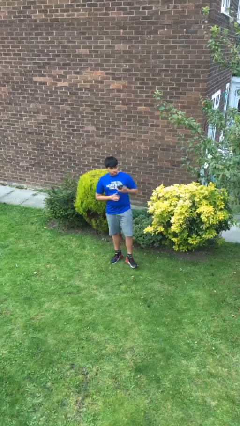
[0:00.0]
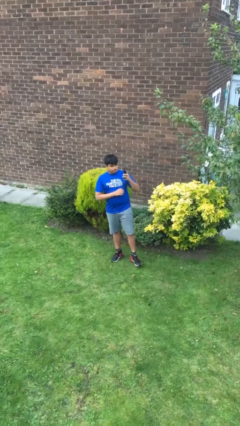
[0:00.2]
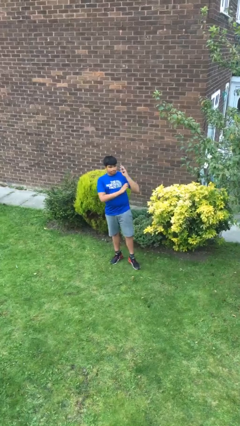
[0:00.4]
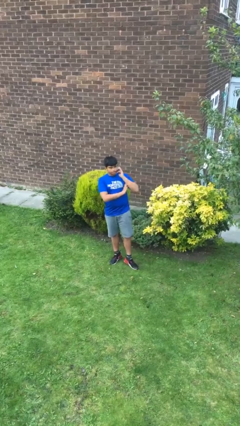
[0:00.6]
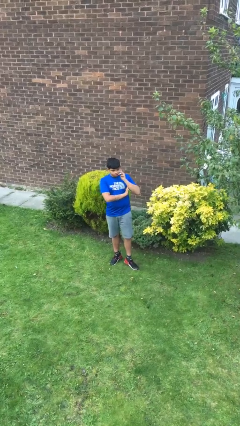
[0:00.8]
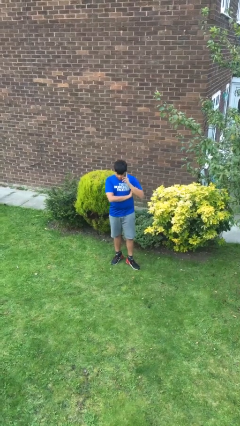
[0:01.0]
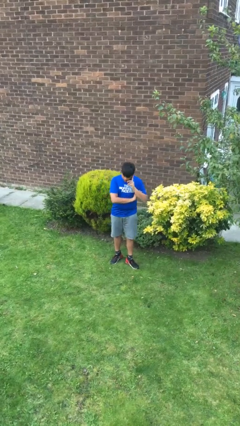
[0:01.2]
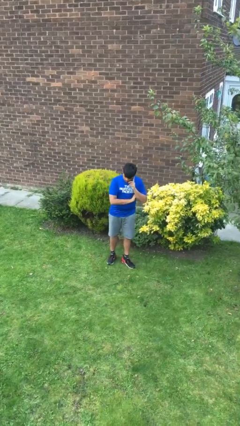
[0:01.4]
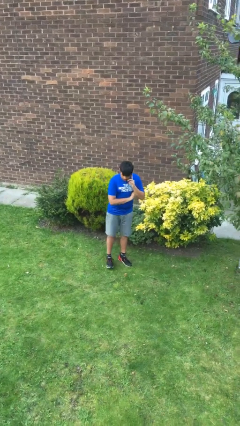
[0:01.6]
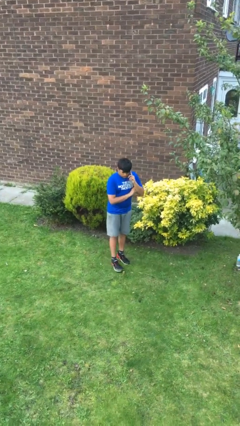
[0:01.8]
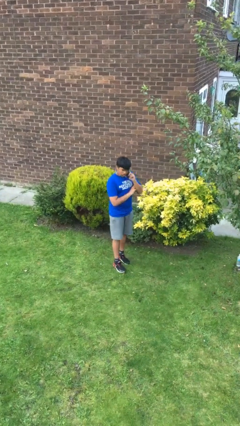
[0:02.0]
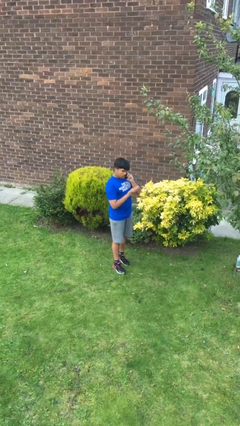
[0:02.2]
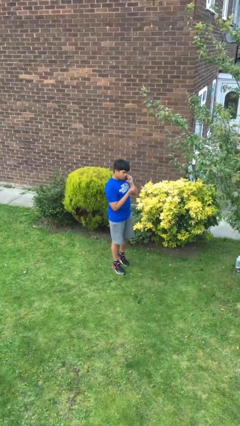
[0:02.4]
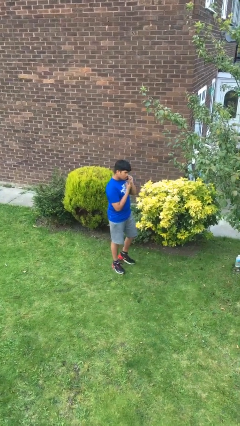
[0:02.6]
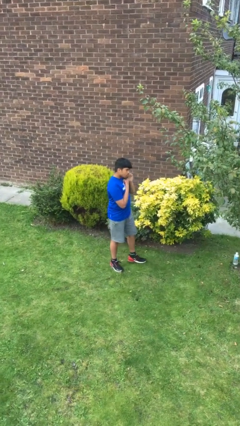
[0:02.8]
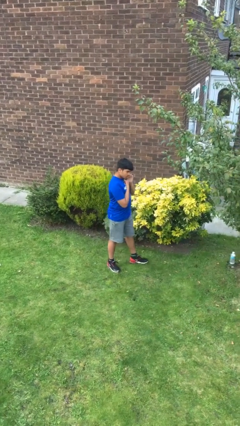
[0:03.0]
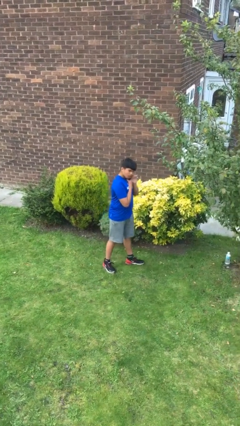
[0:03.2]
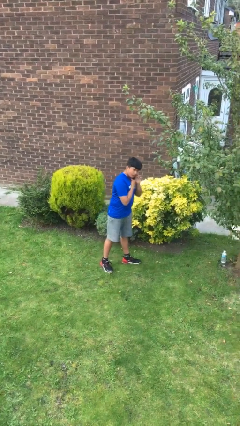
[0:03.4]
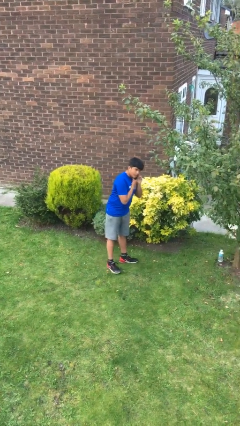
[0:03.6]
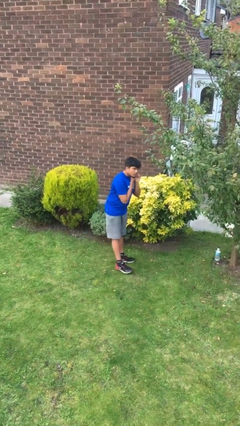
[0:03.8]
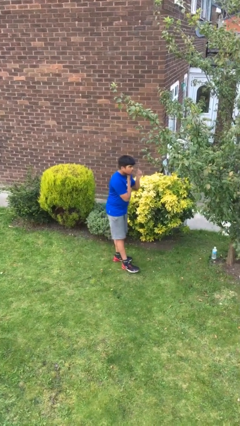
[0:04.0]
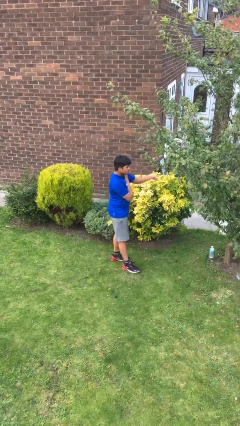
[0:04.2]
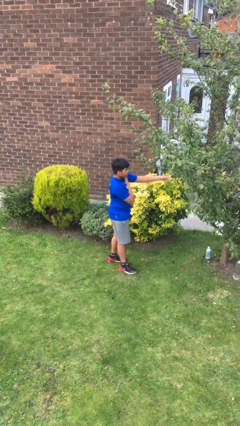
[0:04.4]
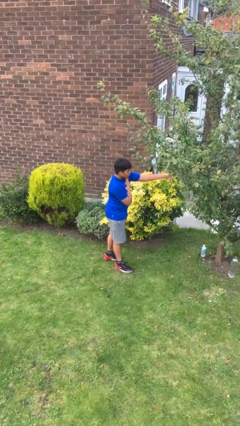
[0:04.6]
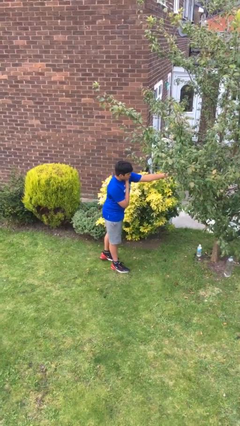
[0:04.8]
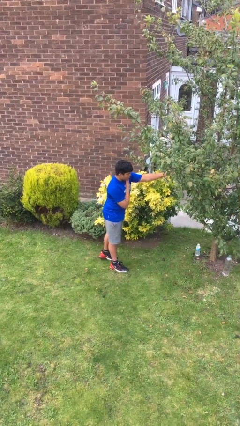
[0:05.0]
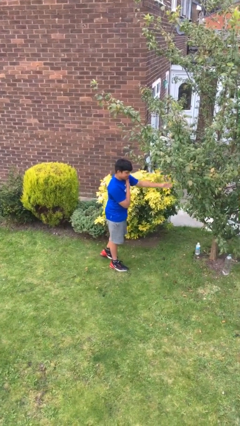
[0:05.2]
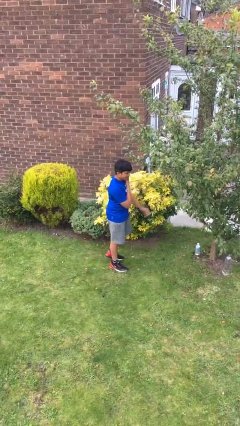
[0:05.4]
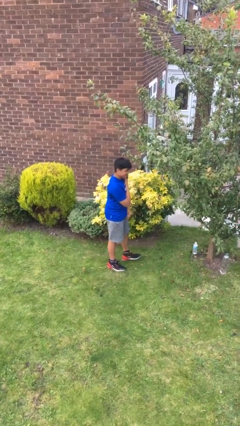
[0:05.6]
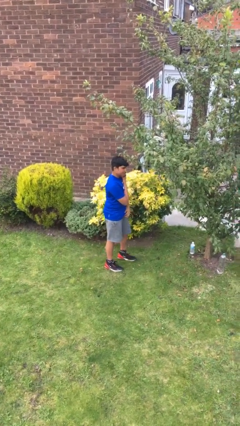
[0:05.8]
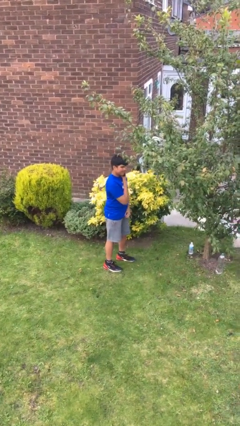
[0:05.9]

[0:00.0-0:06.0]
person talks on phone

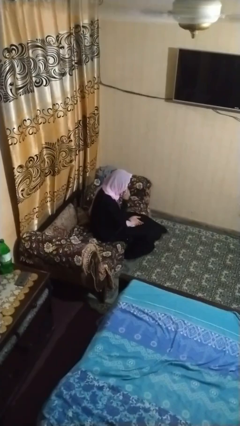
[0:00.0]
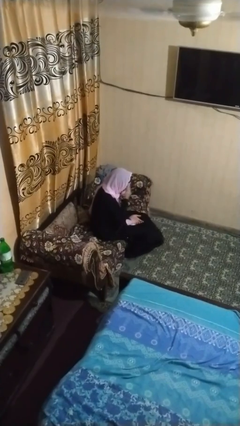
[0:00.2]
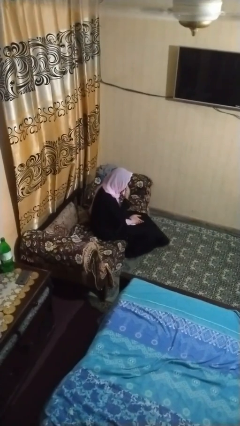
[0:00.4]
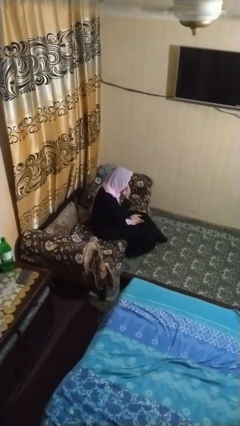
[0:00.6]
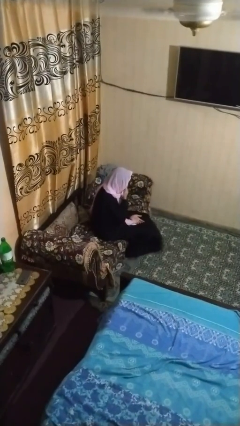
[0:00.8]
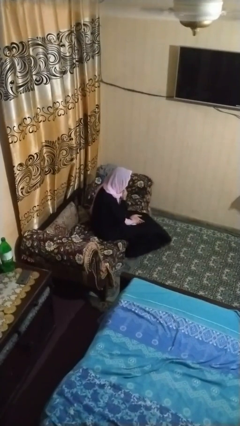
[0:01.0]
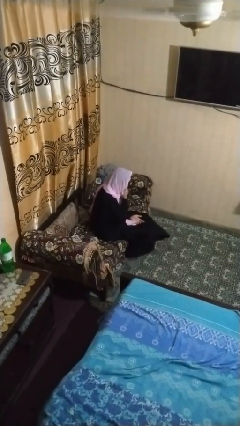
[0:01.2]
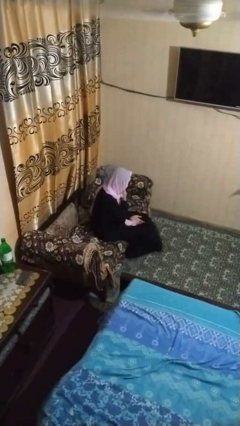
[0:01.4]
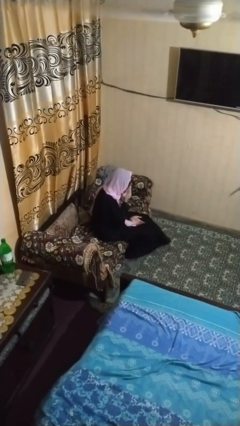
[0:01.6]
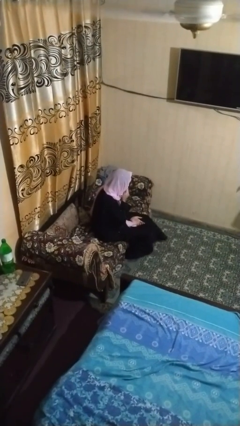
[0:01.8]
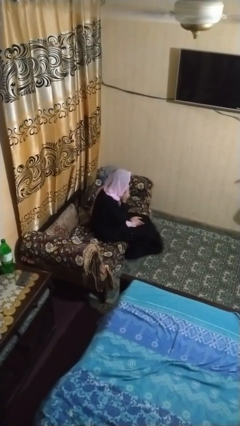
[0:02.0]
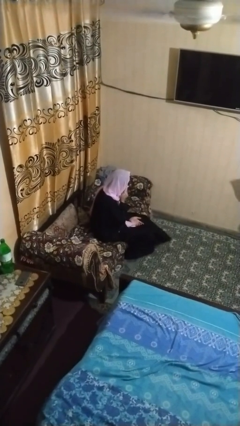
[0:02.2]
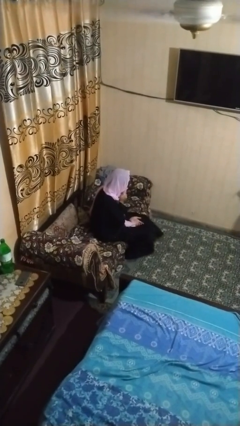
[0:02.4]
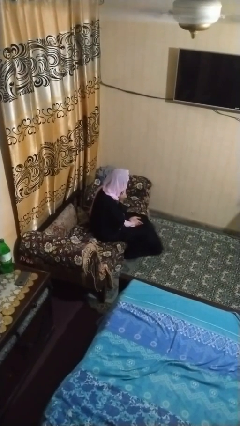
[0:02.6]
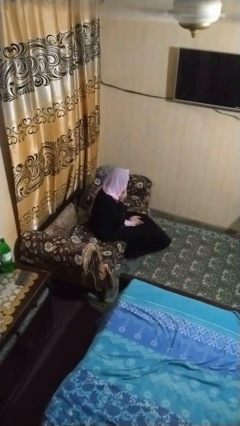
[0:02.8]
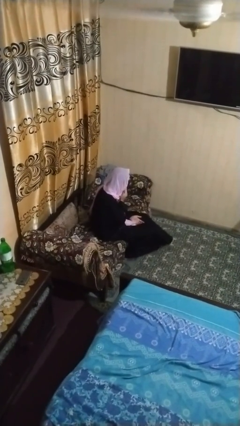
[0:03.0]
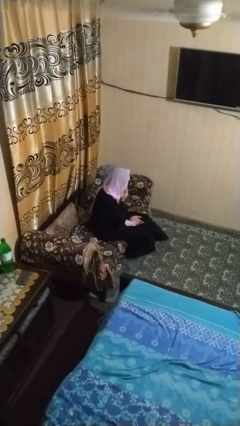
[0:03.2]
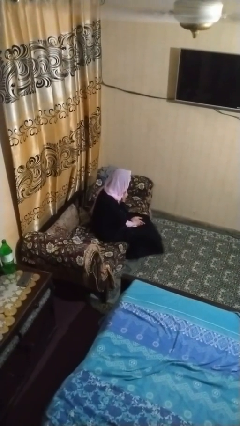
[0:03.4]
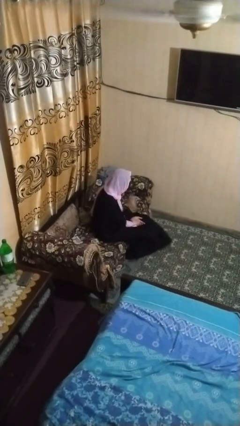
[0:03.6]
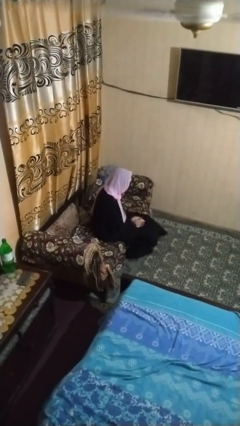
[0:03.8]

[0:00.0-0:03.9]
person wipes mouth with napkin

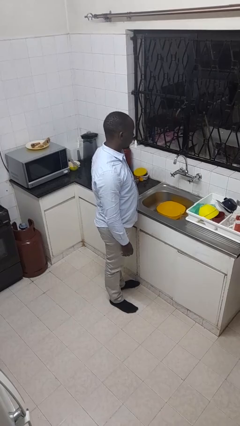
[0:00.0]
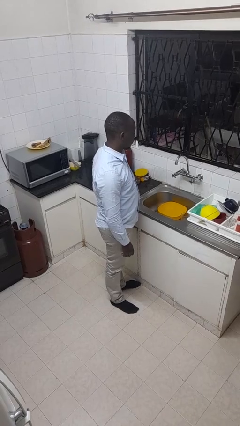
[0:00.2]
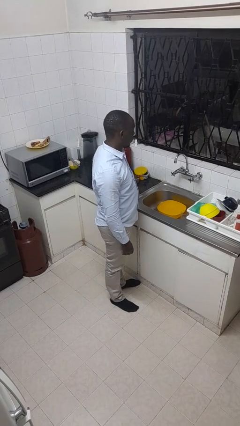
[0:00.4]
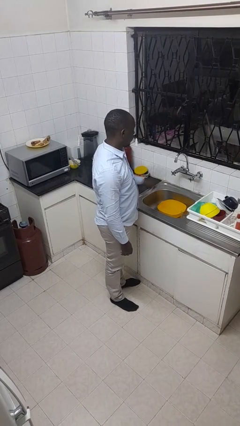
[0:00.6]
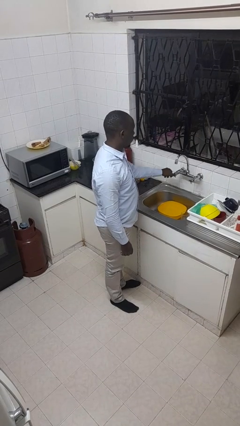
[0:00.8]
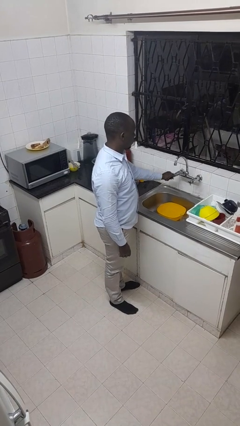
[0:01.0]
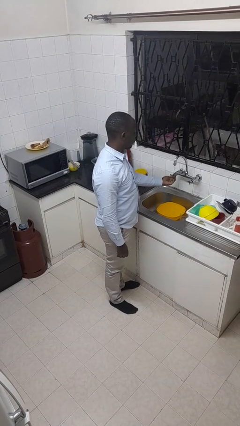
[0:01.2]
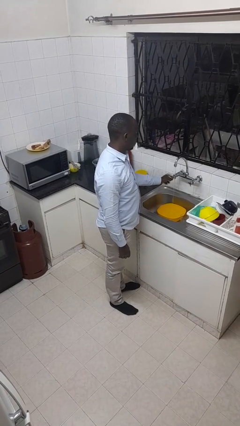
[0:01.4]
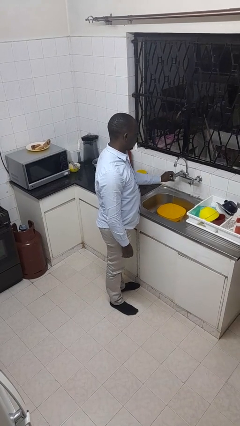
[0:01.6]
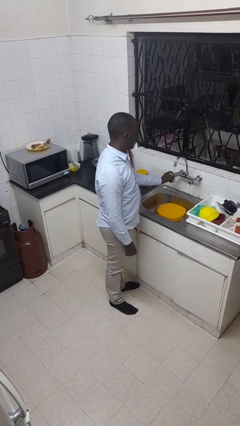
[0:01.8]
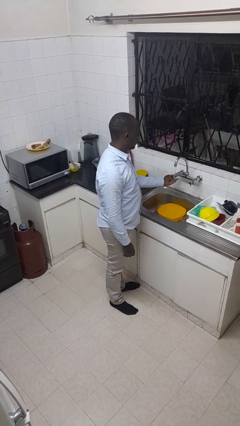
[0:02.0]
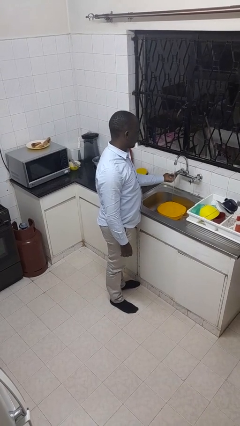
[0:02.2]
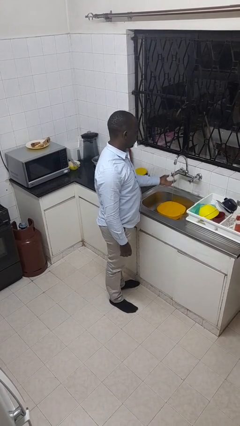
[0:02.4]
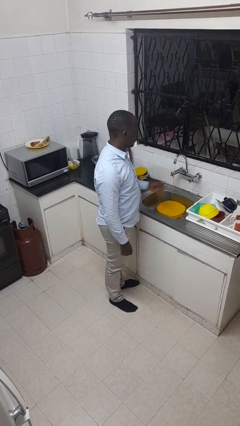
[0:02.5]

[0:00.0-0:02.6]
person turns on faucet

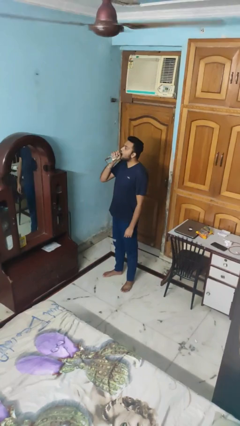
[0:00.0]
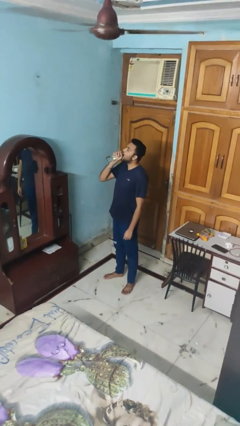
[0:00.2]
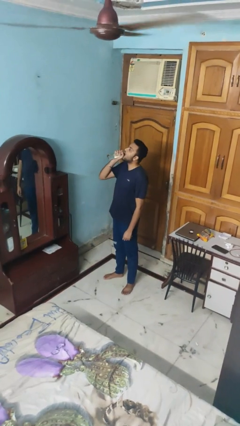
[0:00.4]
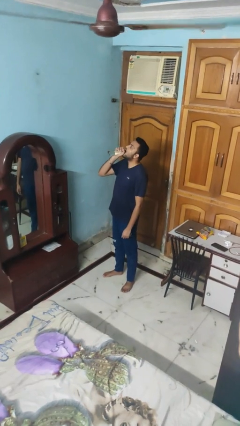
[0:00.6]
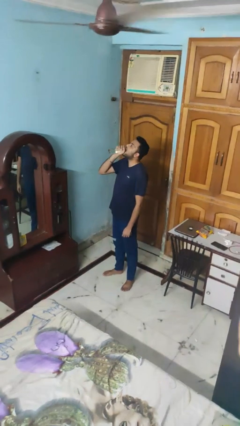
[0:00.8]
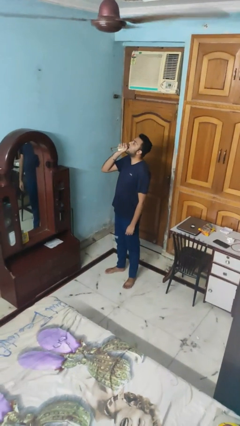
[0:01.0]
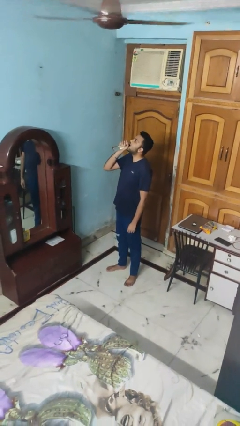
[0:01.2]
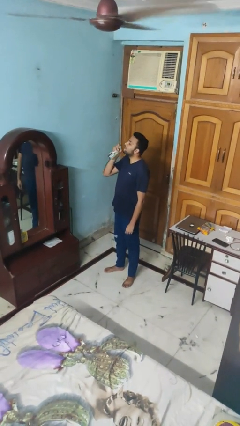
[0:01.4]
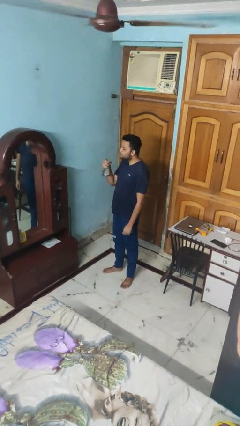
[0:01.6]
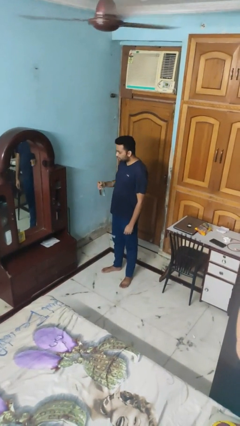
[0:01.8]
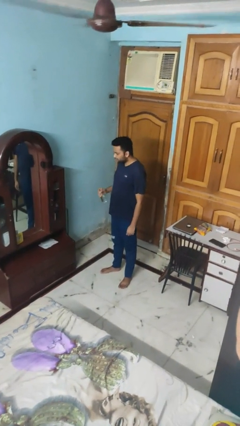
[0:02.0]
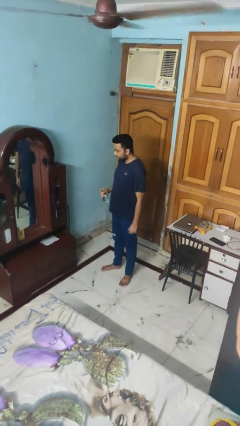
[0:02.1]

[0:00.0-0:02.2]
person drinks from bottle

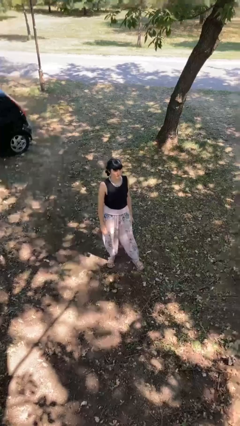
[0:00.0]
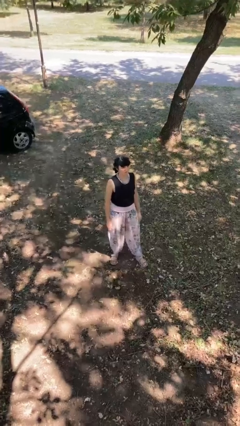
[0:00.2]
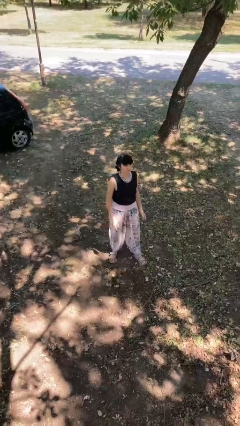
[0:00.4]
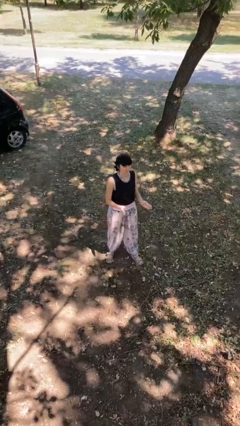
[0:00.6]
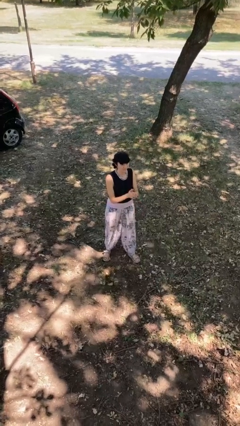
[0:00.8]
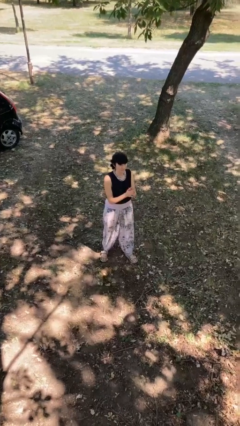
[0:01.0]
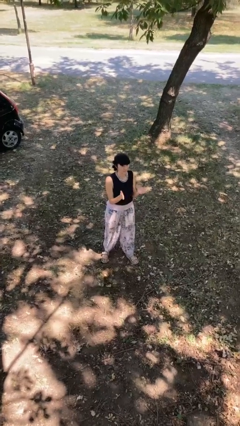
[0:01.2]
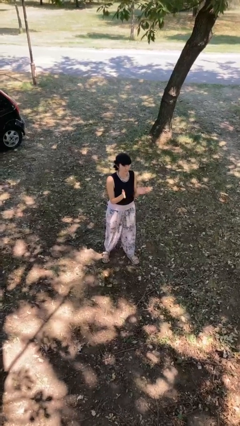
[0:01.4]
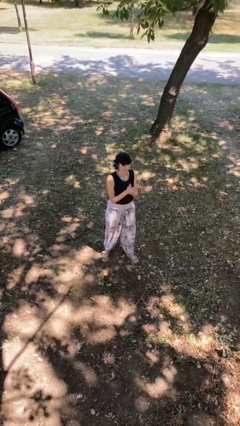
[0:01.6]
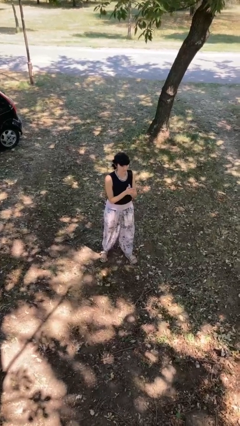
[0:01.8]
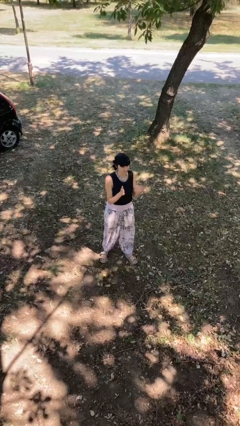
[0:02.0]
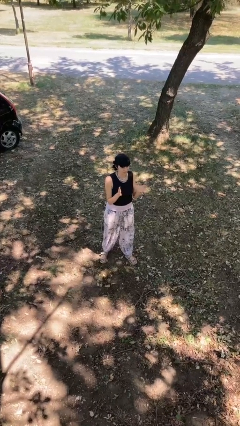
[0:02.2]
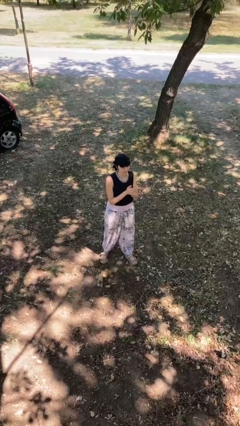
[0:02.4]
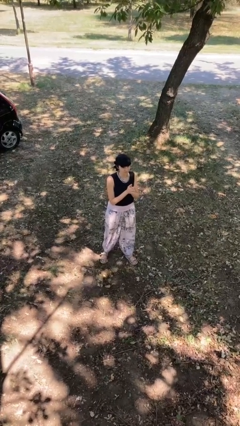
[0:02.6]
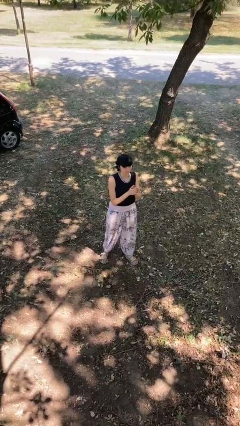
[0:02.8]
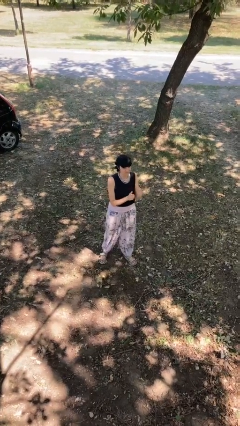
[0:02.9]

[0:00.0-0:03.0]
person claps hands
